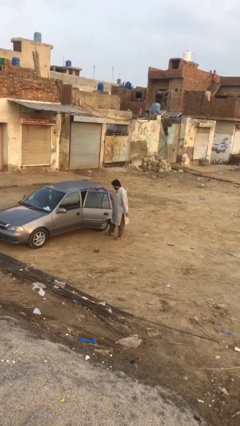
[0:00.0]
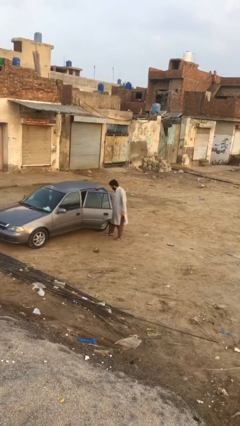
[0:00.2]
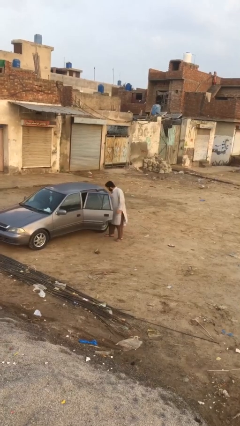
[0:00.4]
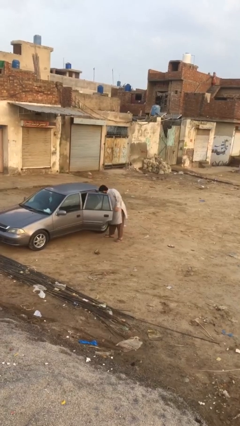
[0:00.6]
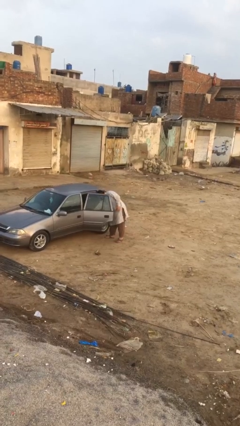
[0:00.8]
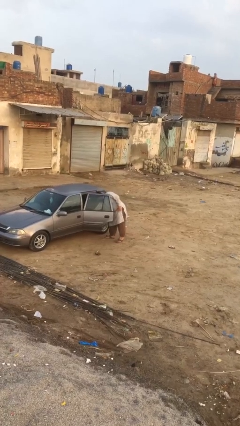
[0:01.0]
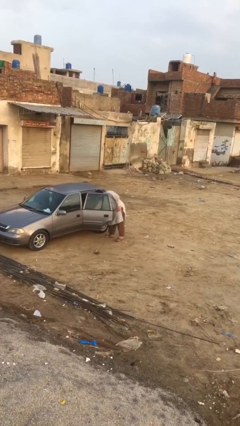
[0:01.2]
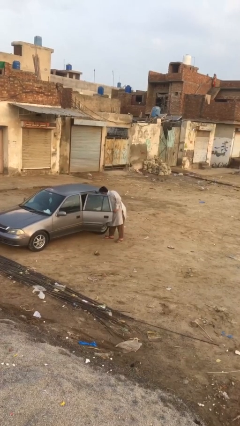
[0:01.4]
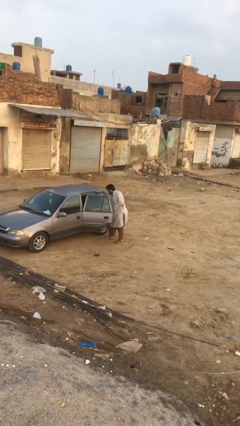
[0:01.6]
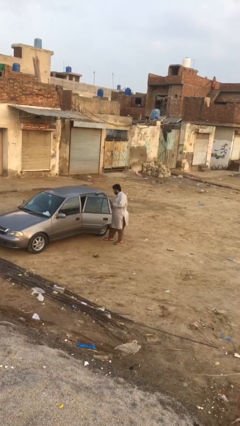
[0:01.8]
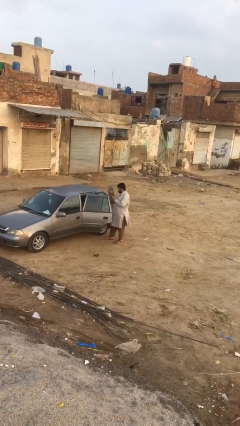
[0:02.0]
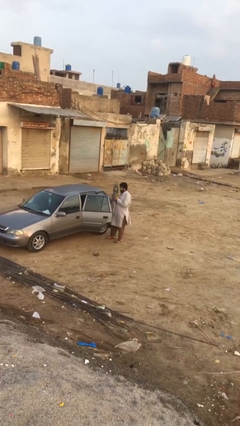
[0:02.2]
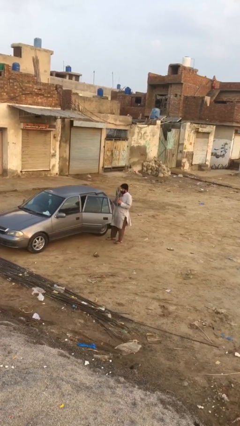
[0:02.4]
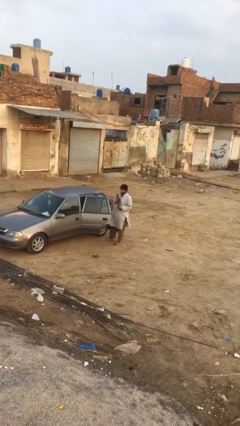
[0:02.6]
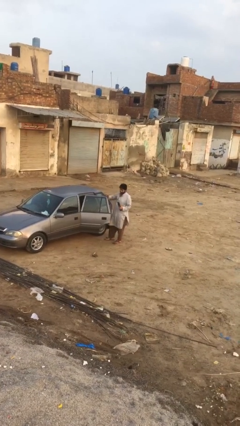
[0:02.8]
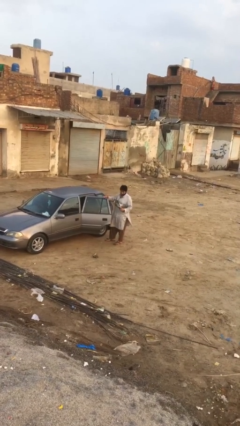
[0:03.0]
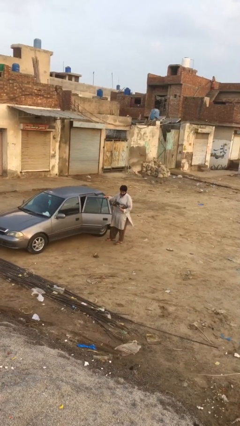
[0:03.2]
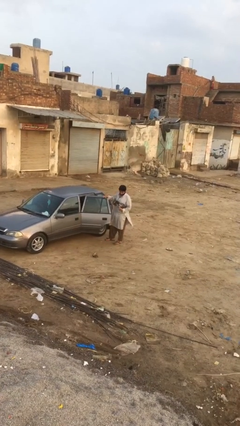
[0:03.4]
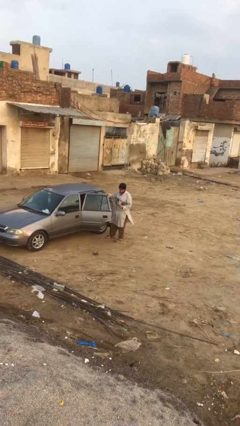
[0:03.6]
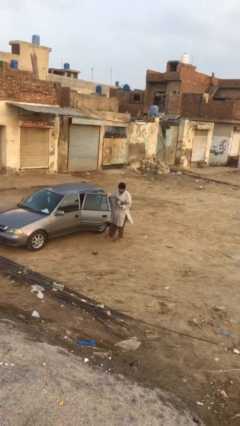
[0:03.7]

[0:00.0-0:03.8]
person unloads car

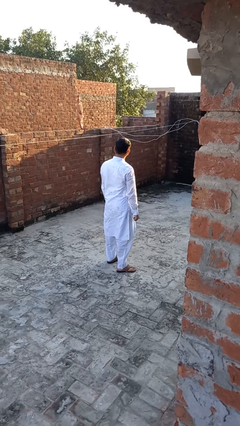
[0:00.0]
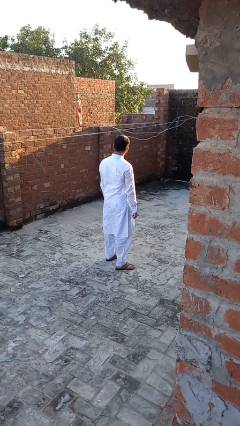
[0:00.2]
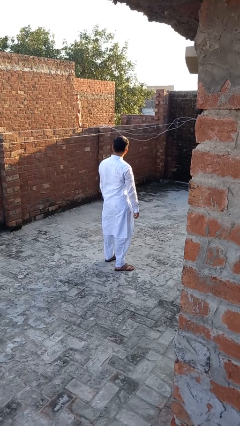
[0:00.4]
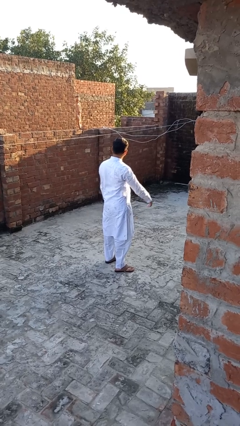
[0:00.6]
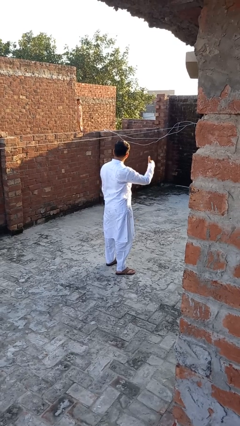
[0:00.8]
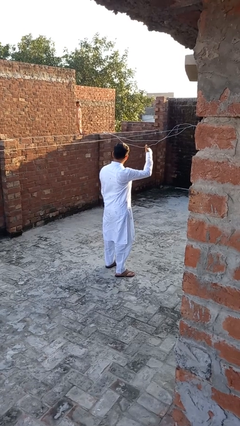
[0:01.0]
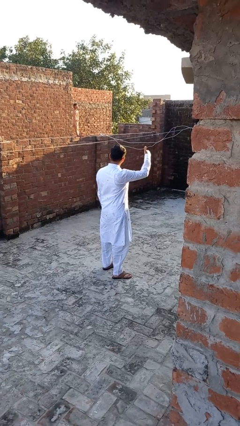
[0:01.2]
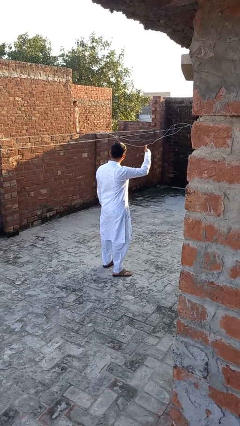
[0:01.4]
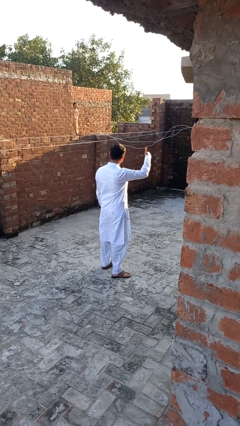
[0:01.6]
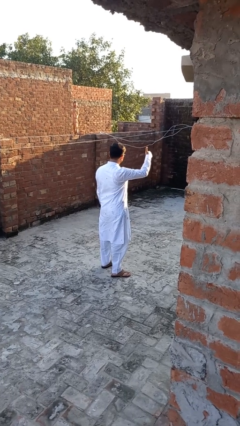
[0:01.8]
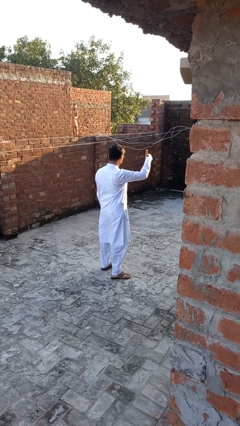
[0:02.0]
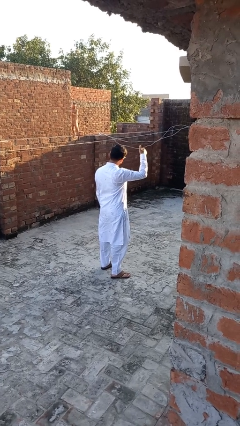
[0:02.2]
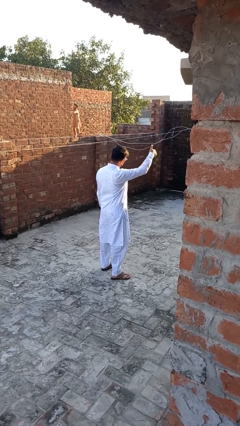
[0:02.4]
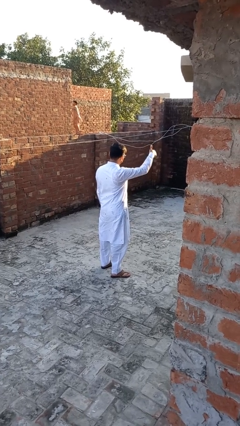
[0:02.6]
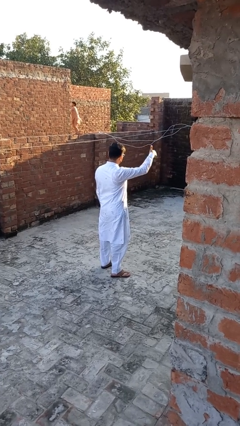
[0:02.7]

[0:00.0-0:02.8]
person gestures thumbs up

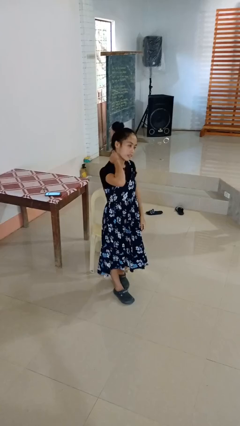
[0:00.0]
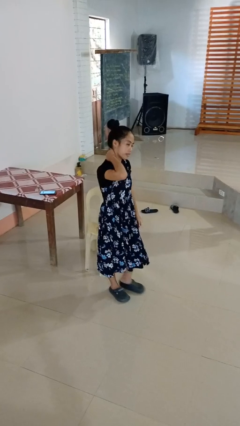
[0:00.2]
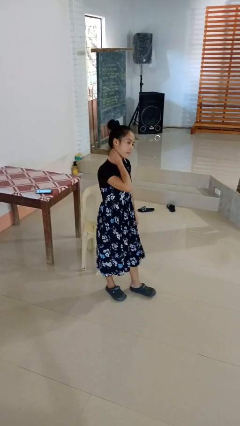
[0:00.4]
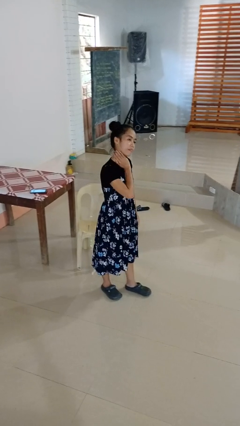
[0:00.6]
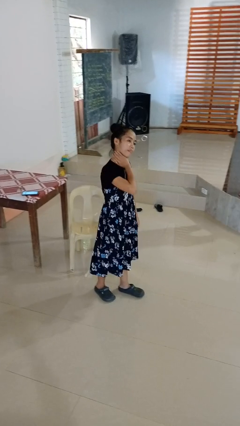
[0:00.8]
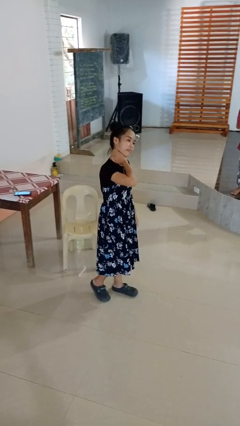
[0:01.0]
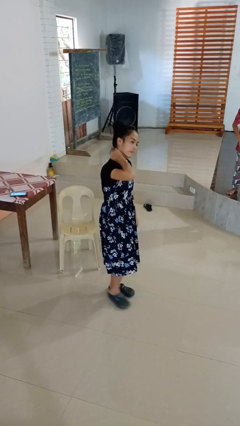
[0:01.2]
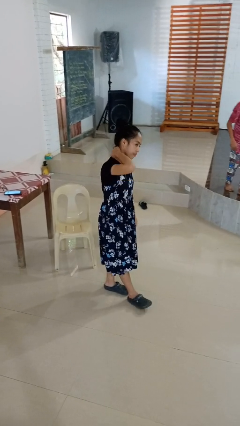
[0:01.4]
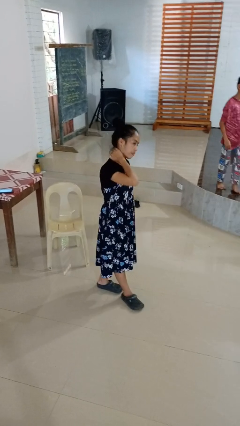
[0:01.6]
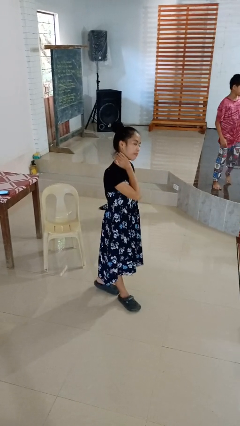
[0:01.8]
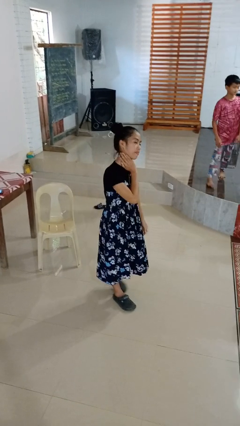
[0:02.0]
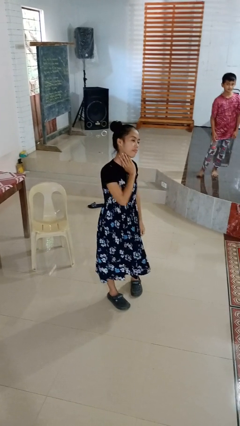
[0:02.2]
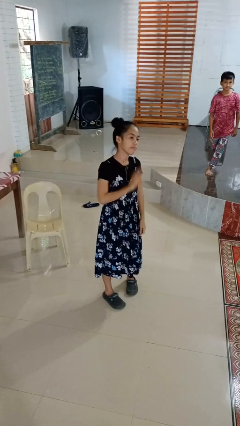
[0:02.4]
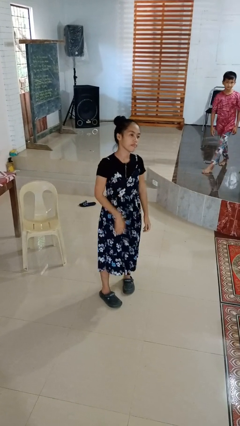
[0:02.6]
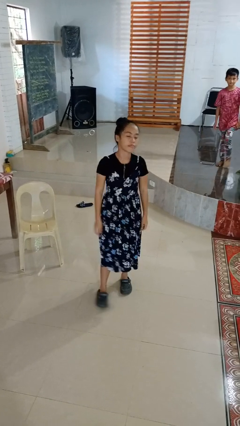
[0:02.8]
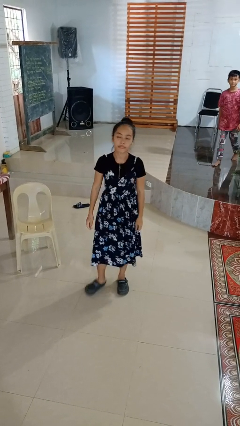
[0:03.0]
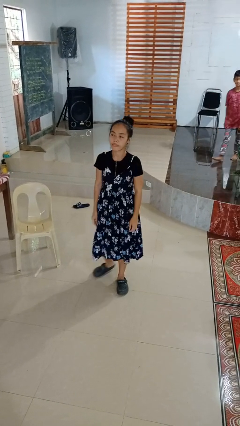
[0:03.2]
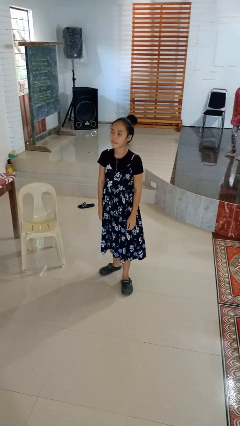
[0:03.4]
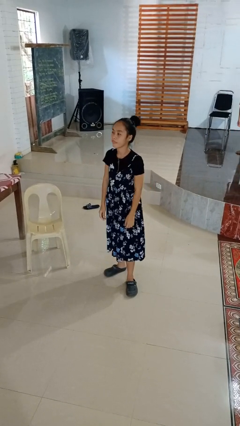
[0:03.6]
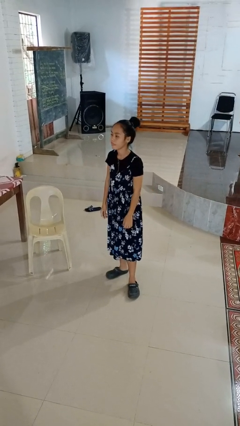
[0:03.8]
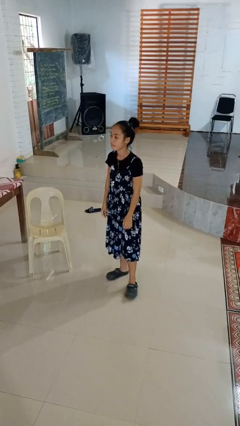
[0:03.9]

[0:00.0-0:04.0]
person rubs neck

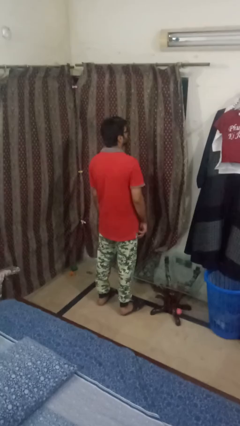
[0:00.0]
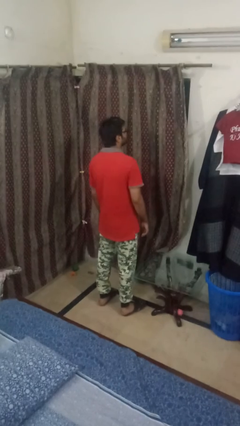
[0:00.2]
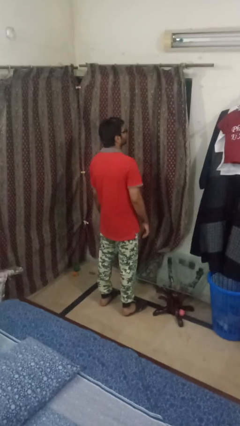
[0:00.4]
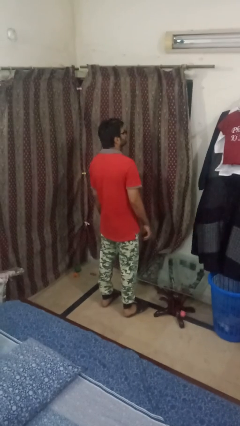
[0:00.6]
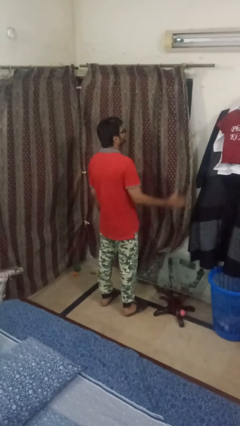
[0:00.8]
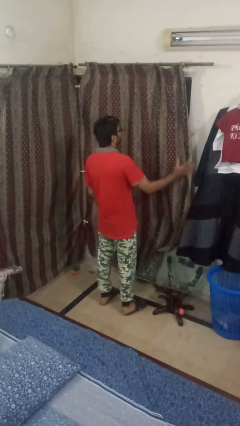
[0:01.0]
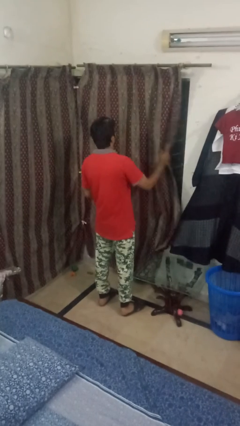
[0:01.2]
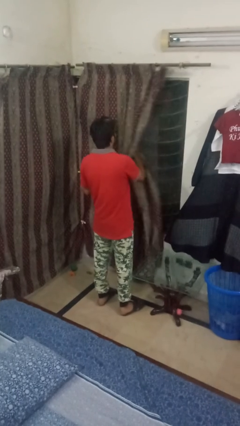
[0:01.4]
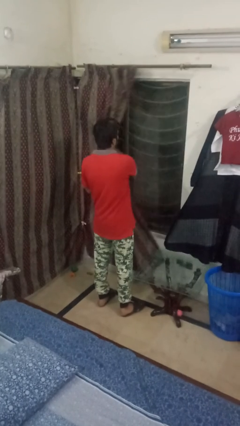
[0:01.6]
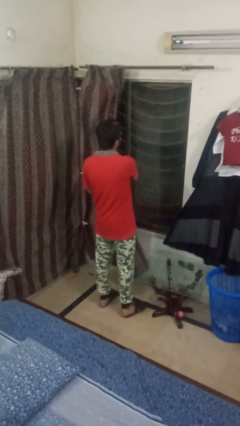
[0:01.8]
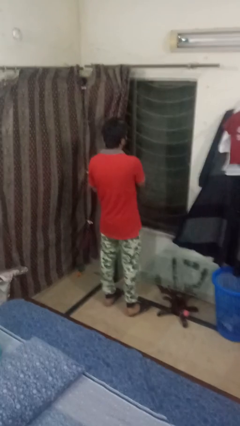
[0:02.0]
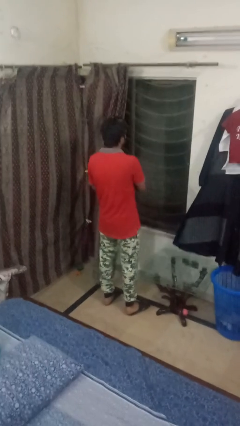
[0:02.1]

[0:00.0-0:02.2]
person opens curtains

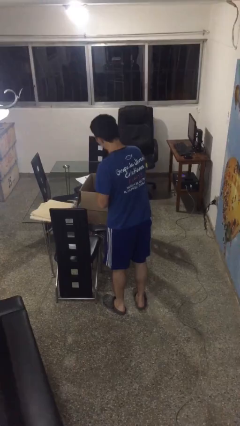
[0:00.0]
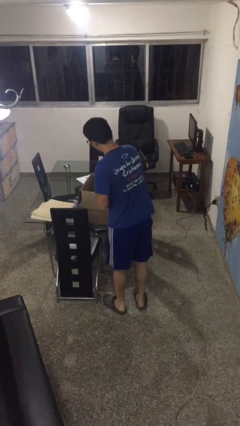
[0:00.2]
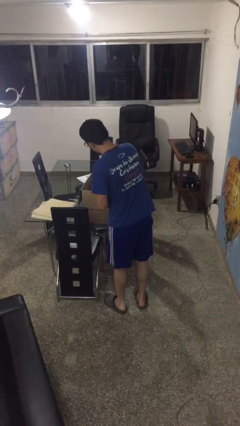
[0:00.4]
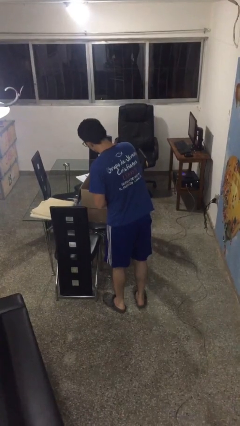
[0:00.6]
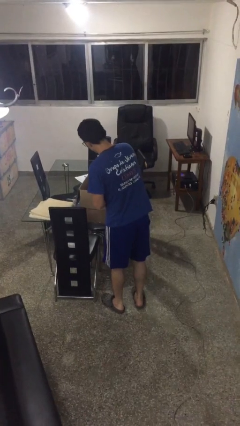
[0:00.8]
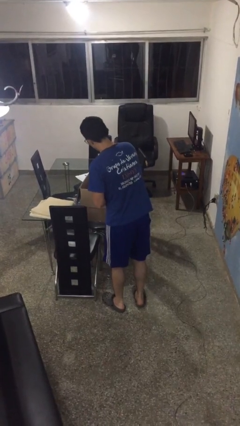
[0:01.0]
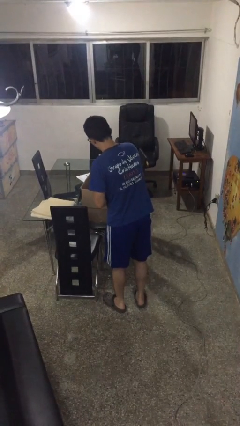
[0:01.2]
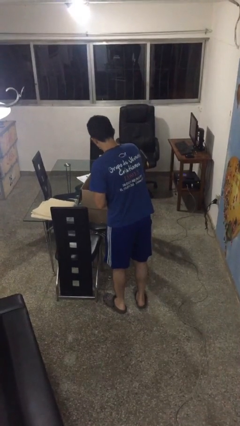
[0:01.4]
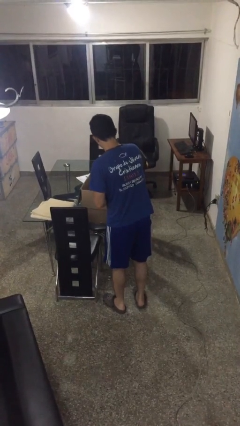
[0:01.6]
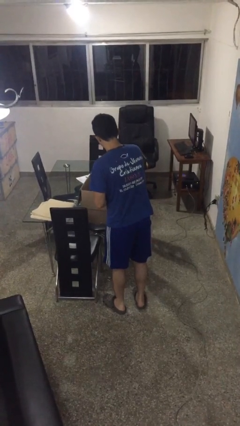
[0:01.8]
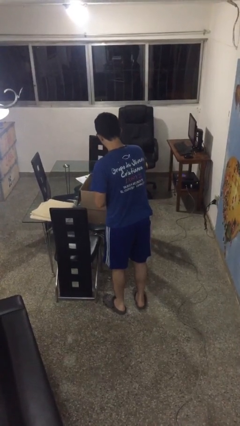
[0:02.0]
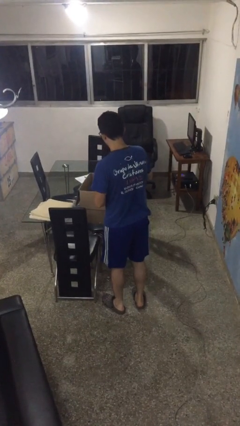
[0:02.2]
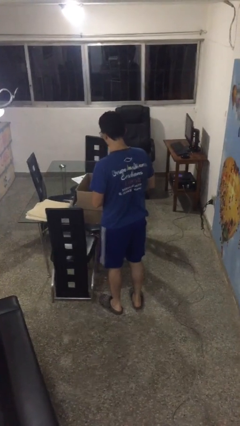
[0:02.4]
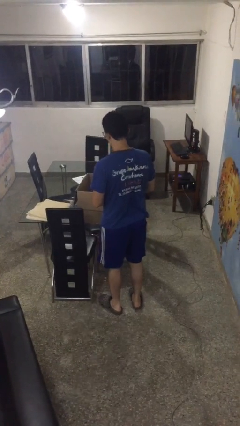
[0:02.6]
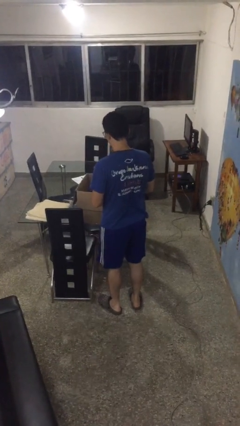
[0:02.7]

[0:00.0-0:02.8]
person searches in box

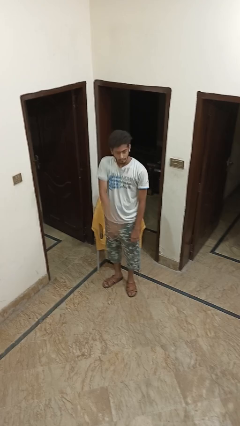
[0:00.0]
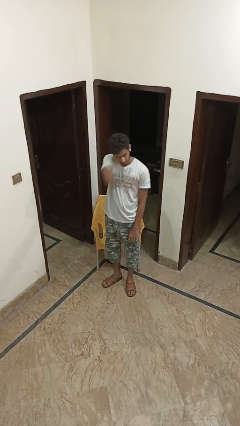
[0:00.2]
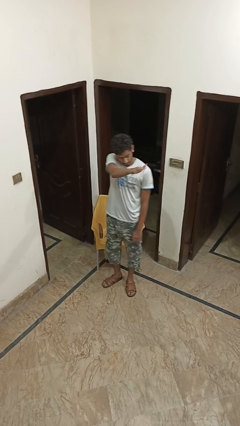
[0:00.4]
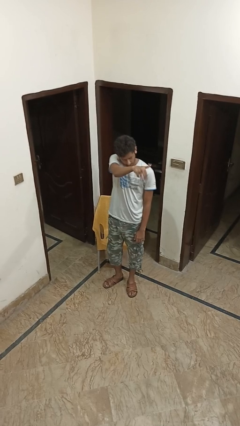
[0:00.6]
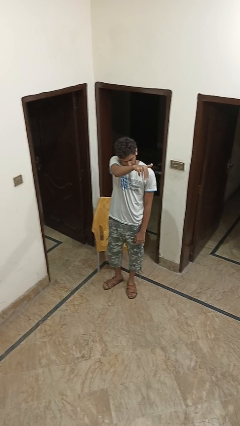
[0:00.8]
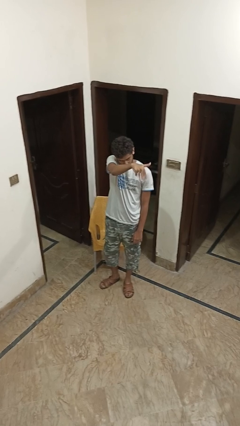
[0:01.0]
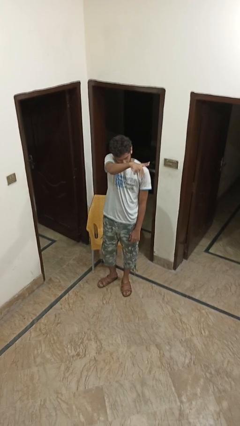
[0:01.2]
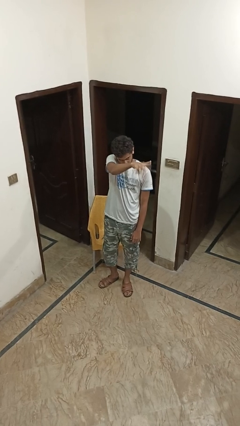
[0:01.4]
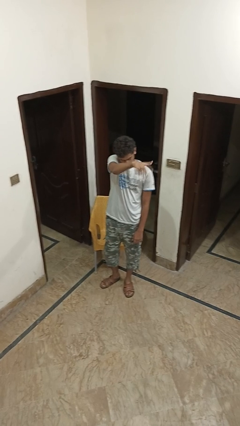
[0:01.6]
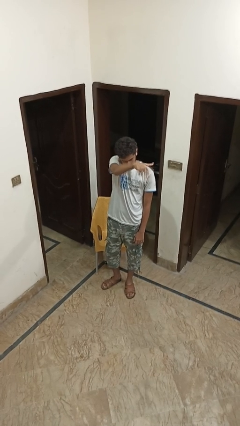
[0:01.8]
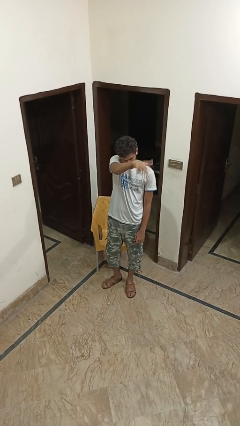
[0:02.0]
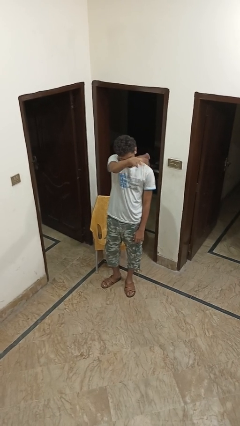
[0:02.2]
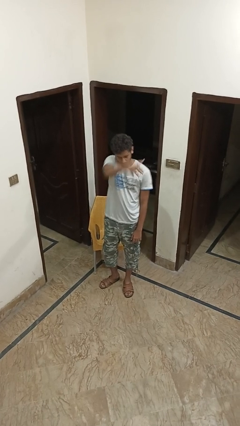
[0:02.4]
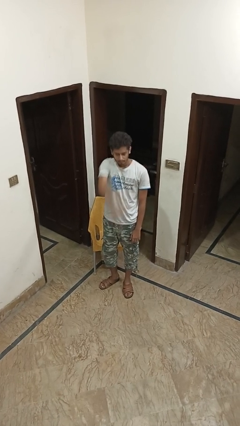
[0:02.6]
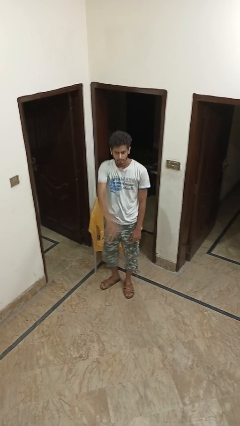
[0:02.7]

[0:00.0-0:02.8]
person gestures come here
